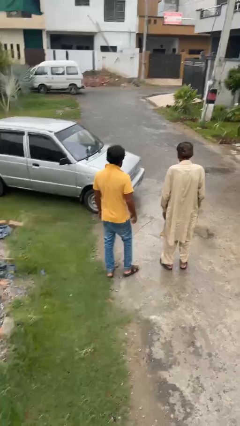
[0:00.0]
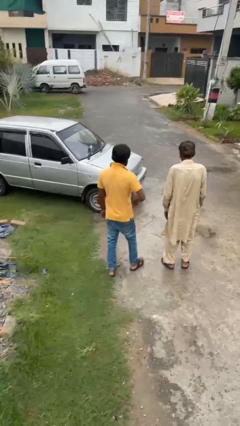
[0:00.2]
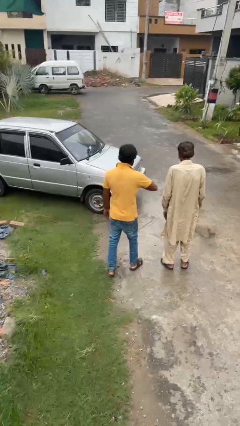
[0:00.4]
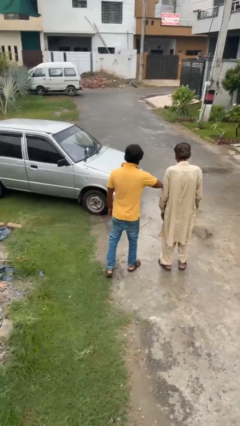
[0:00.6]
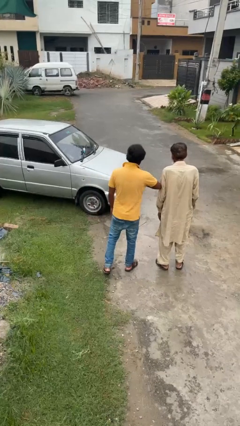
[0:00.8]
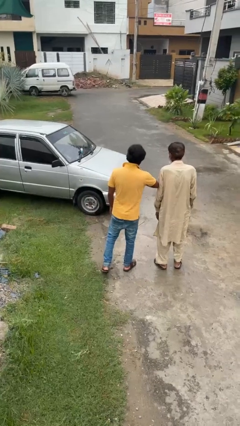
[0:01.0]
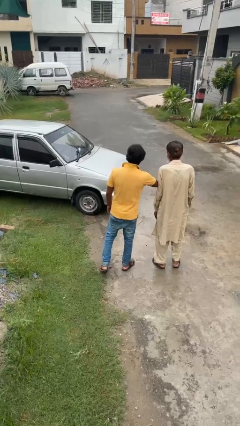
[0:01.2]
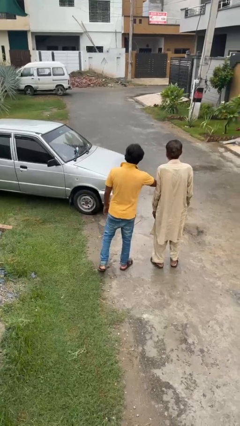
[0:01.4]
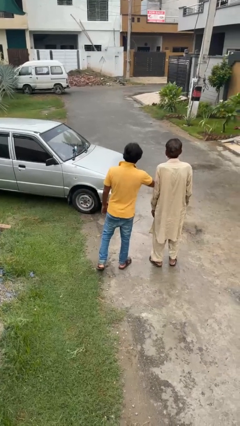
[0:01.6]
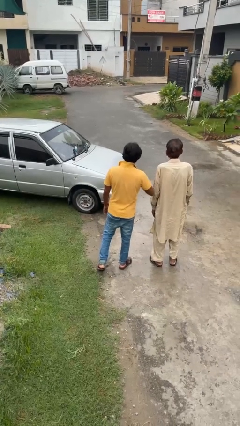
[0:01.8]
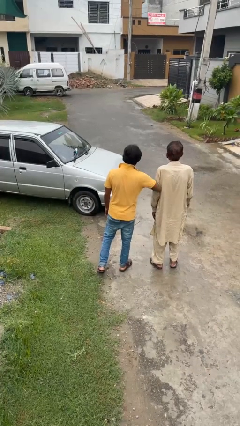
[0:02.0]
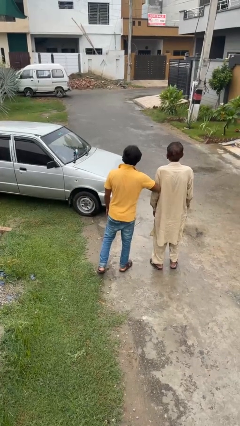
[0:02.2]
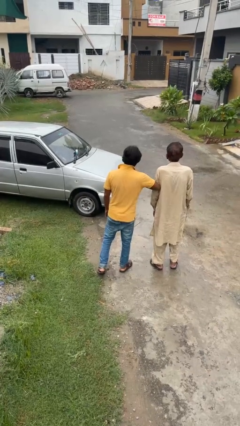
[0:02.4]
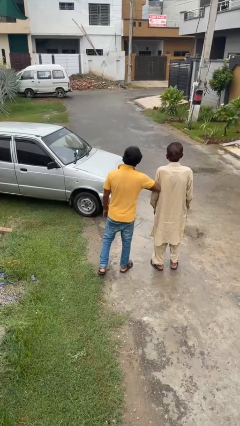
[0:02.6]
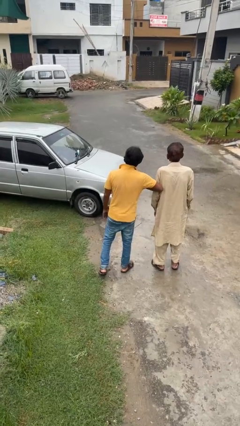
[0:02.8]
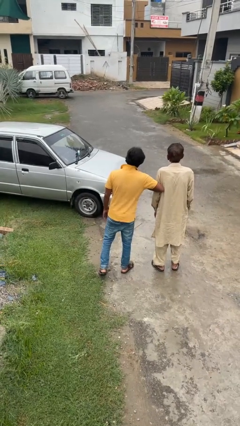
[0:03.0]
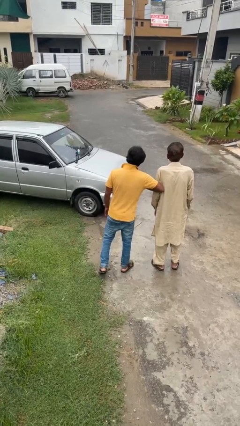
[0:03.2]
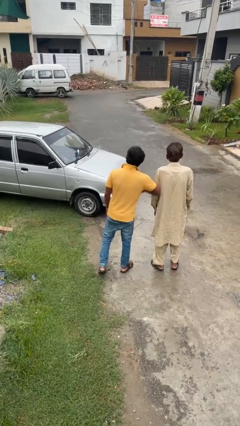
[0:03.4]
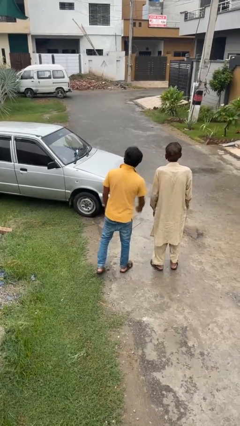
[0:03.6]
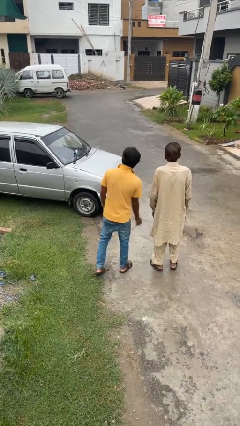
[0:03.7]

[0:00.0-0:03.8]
person nudges person with elbow

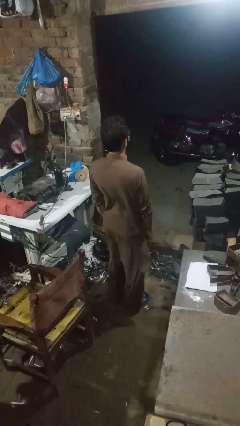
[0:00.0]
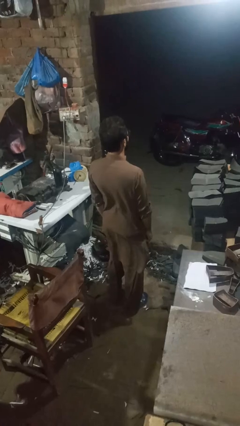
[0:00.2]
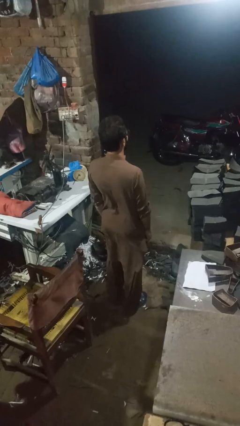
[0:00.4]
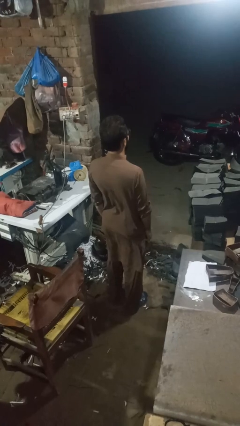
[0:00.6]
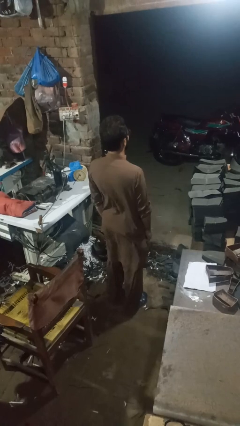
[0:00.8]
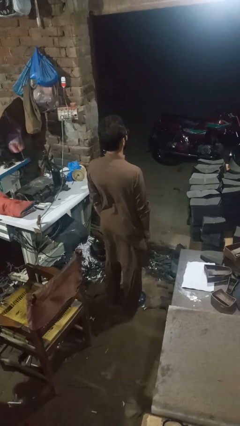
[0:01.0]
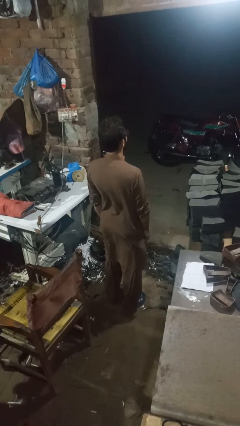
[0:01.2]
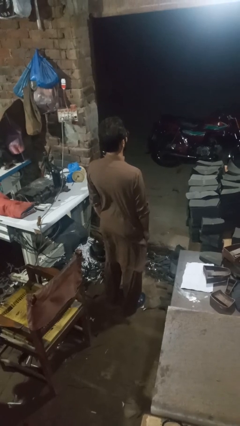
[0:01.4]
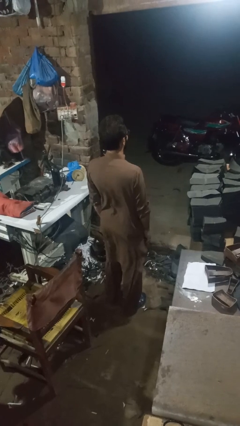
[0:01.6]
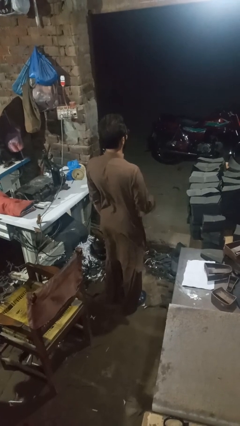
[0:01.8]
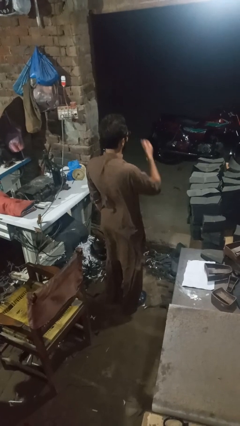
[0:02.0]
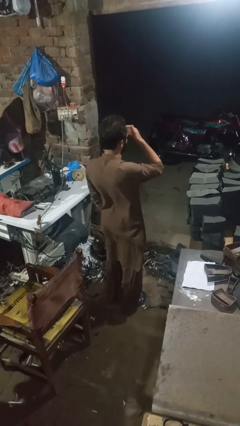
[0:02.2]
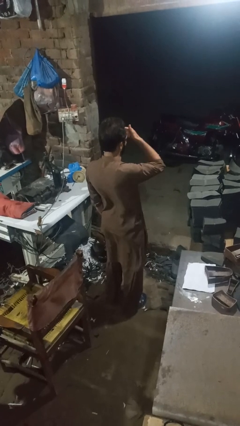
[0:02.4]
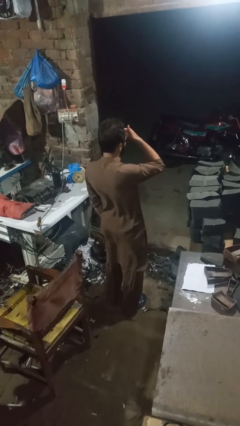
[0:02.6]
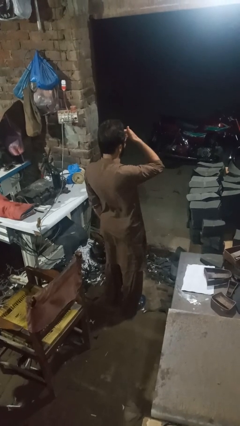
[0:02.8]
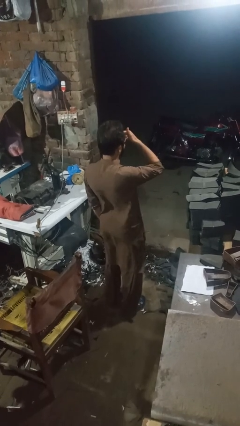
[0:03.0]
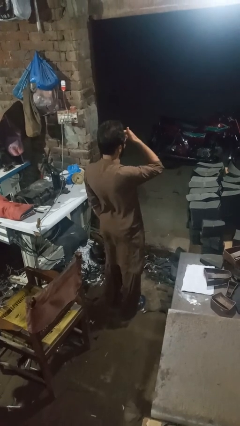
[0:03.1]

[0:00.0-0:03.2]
person shades eyes

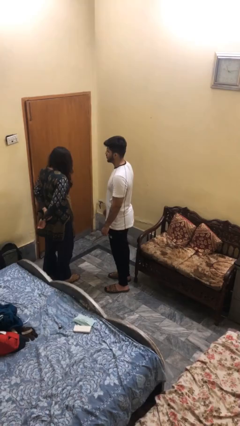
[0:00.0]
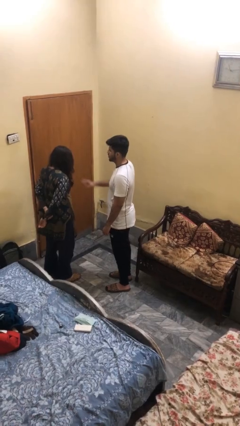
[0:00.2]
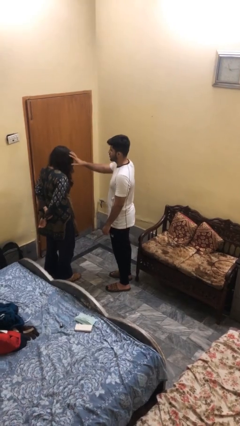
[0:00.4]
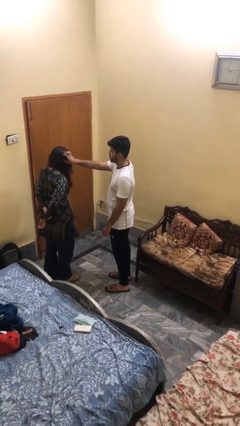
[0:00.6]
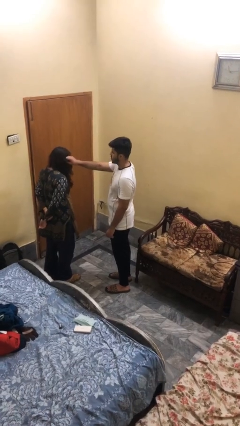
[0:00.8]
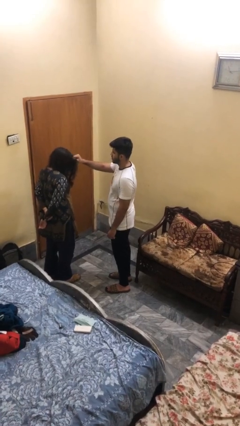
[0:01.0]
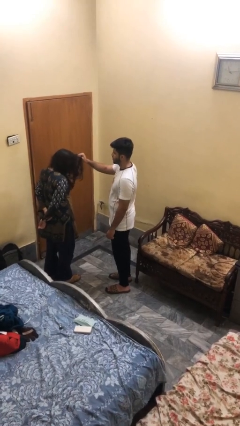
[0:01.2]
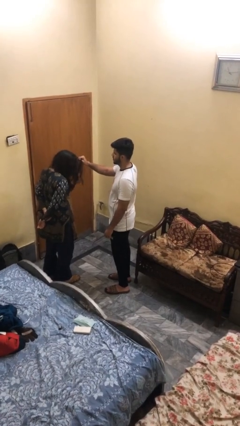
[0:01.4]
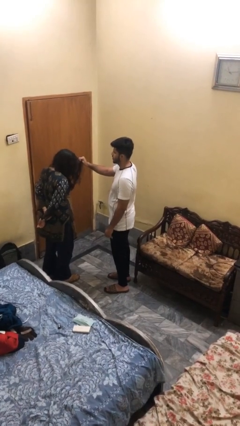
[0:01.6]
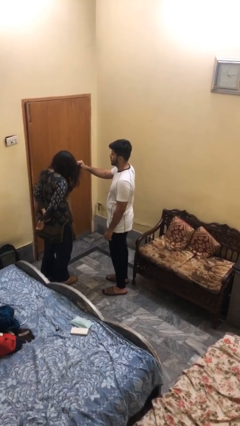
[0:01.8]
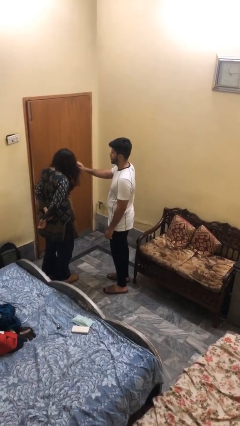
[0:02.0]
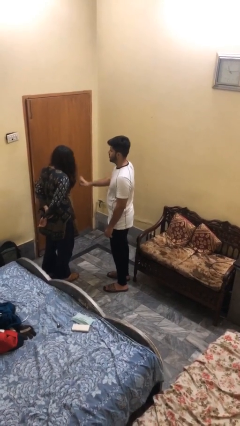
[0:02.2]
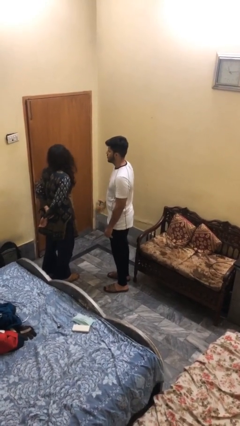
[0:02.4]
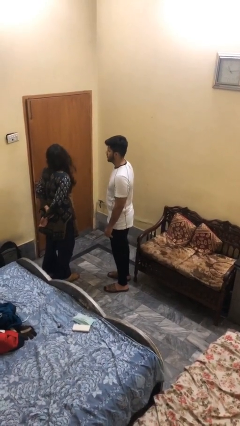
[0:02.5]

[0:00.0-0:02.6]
person grabs person by hair

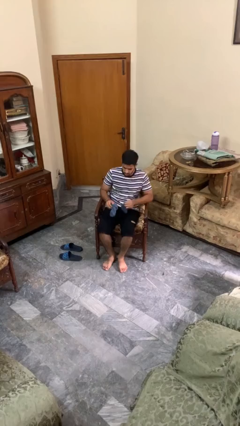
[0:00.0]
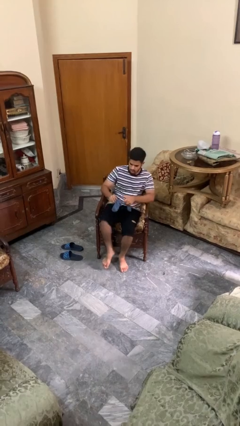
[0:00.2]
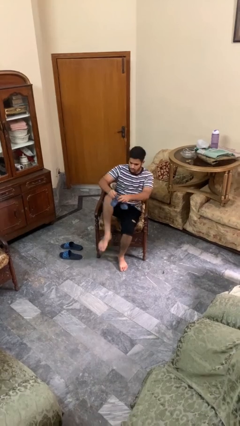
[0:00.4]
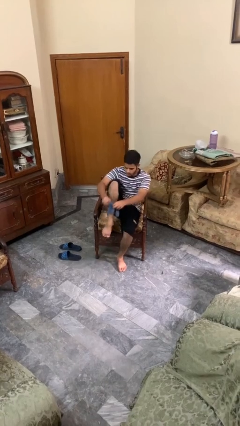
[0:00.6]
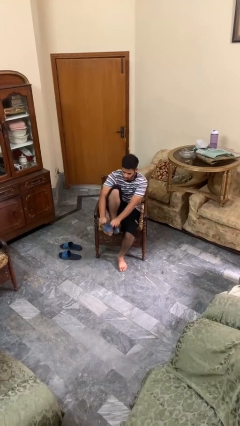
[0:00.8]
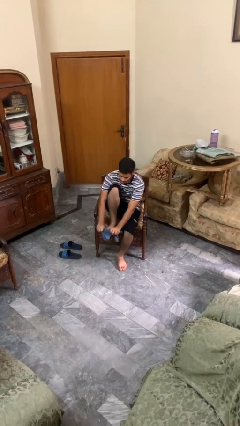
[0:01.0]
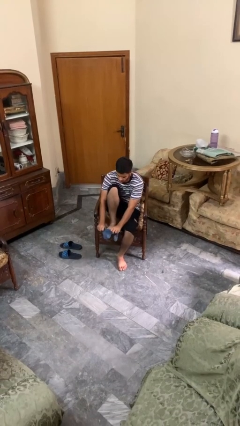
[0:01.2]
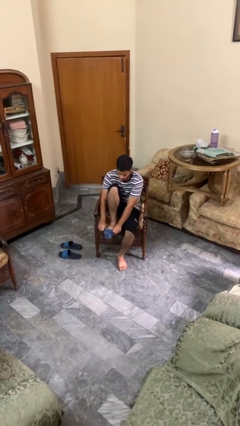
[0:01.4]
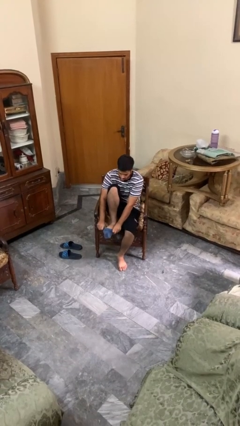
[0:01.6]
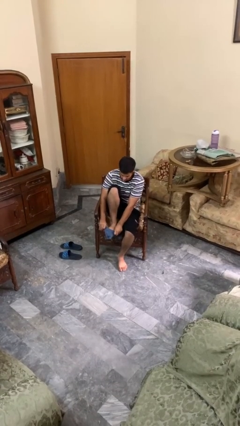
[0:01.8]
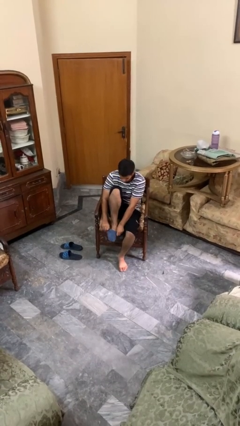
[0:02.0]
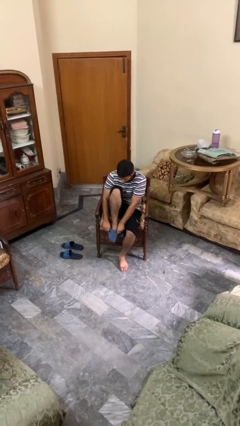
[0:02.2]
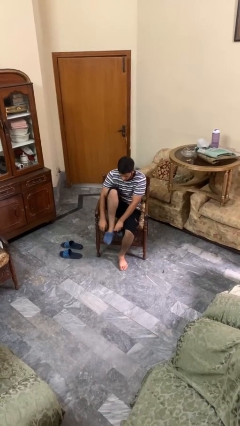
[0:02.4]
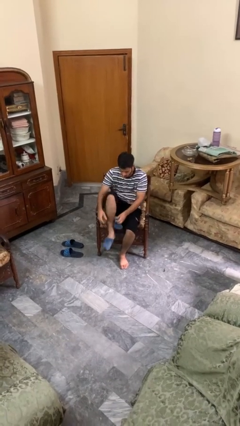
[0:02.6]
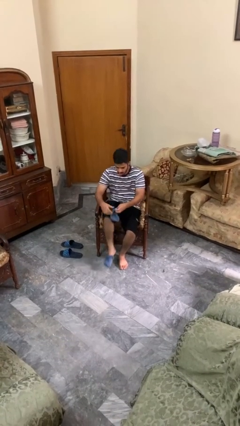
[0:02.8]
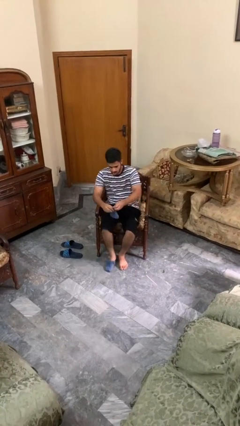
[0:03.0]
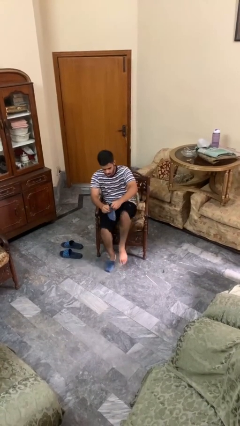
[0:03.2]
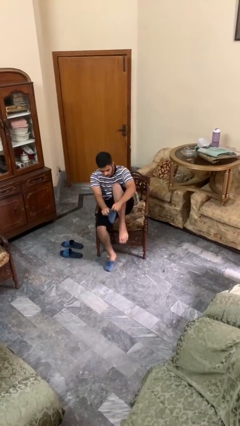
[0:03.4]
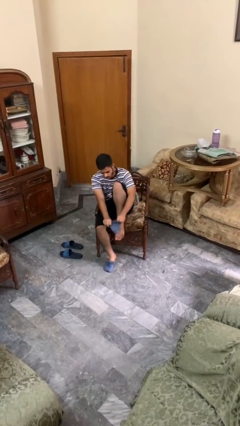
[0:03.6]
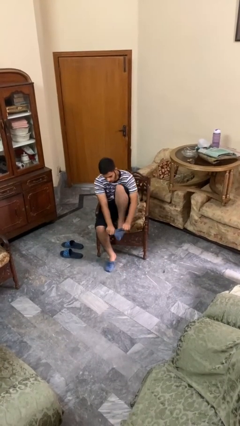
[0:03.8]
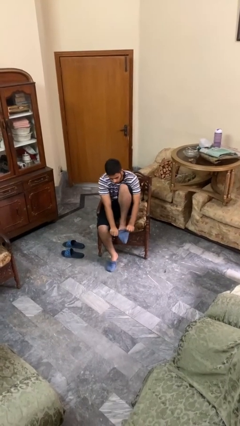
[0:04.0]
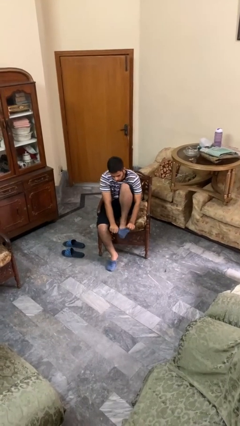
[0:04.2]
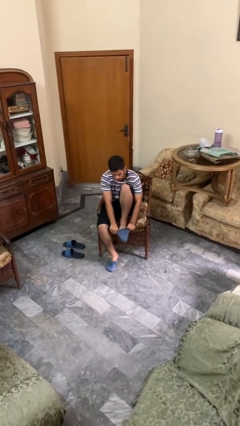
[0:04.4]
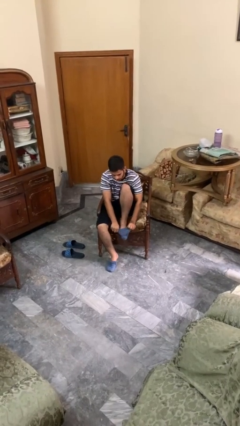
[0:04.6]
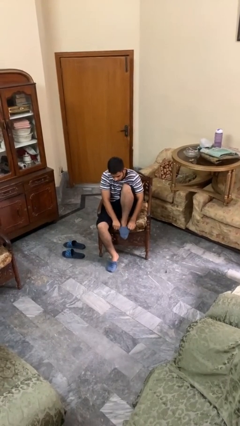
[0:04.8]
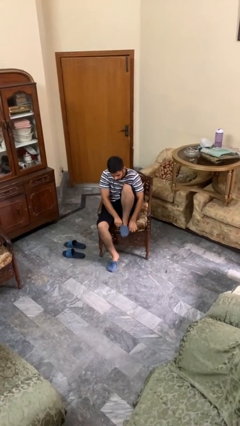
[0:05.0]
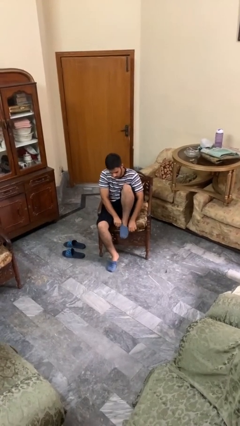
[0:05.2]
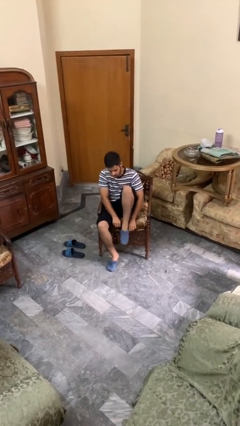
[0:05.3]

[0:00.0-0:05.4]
person puts on socks

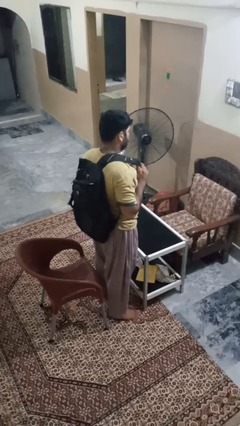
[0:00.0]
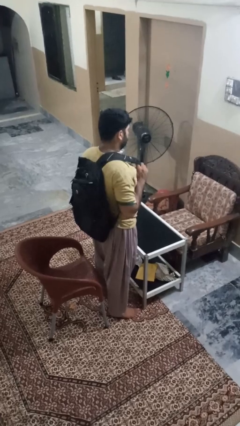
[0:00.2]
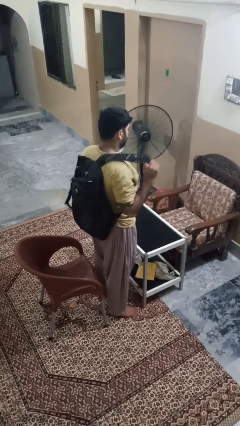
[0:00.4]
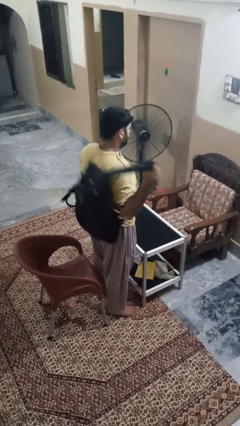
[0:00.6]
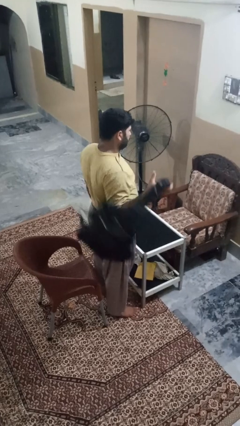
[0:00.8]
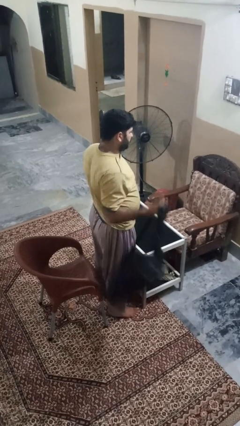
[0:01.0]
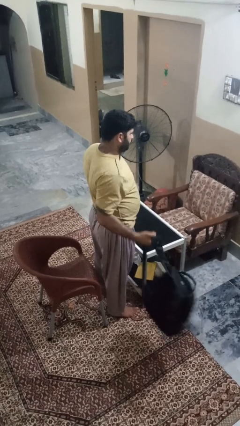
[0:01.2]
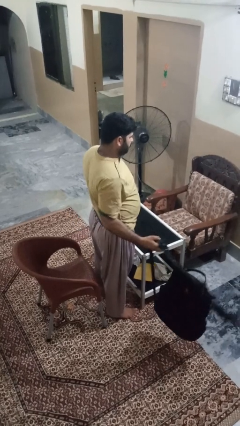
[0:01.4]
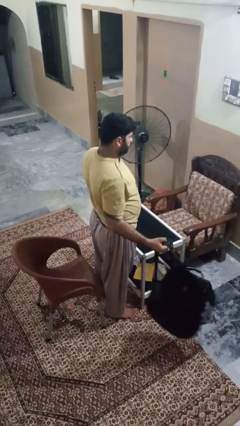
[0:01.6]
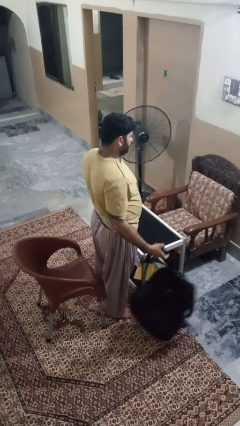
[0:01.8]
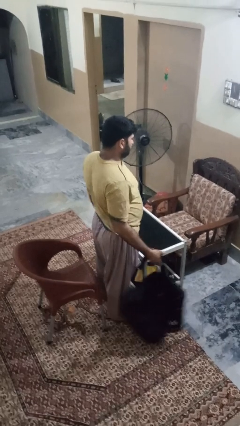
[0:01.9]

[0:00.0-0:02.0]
person takes off backpack

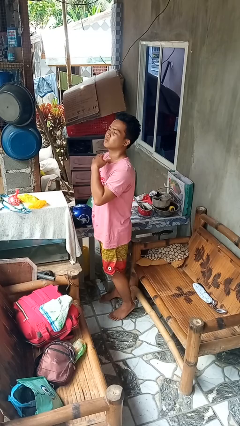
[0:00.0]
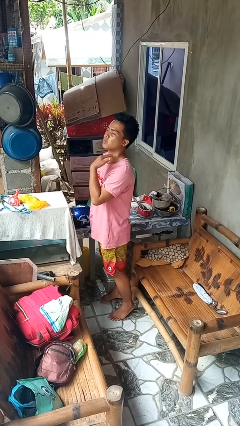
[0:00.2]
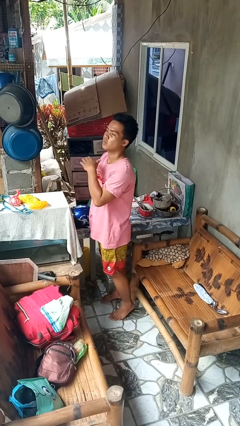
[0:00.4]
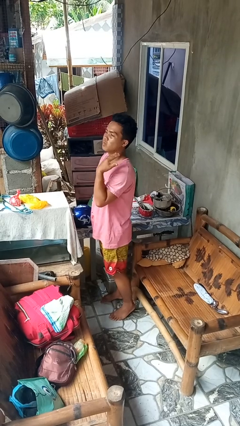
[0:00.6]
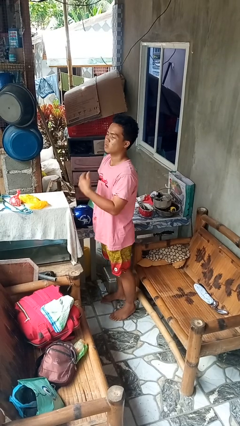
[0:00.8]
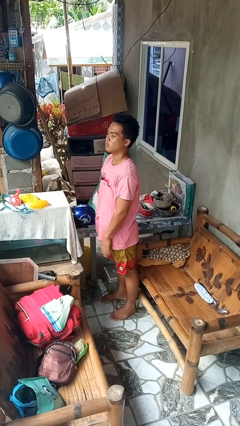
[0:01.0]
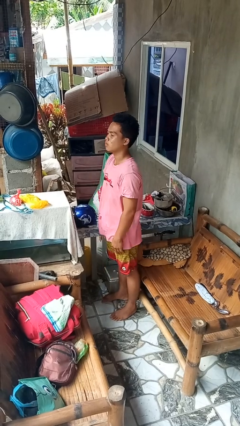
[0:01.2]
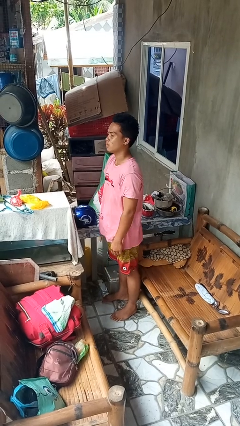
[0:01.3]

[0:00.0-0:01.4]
person gestures cut
